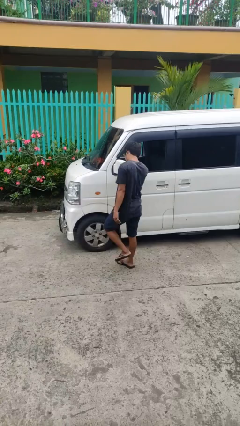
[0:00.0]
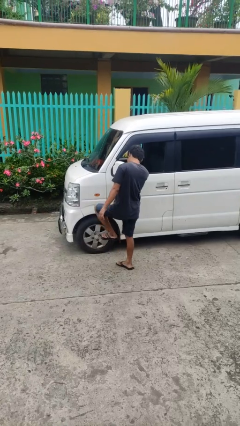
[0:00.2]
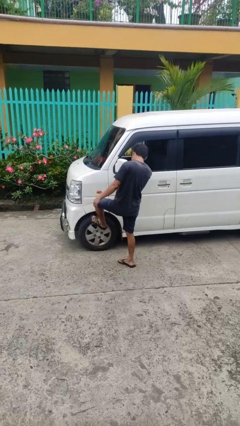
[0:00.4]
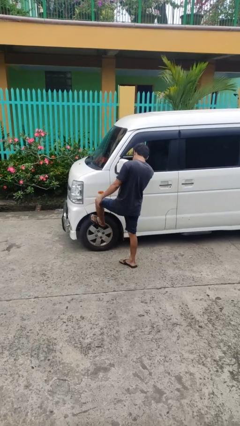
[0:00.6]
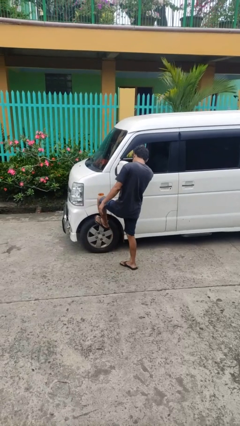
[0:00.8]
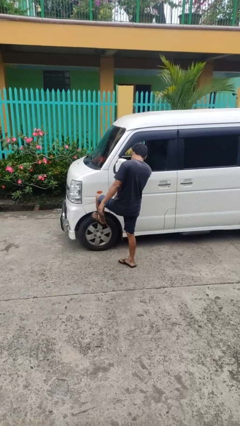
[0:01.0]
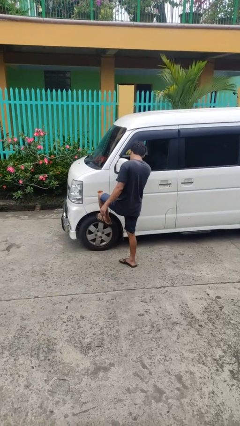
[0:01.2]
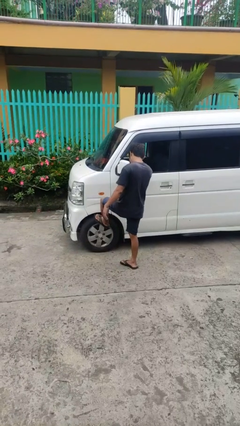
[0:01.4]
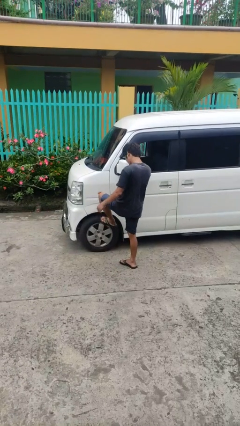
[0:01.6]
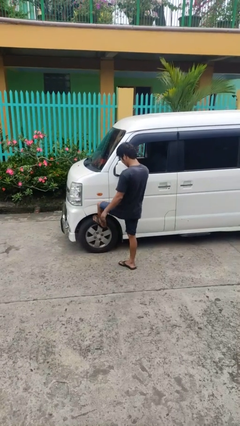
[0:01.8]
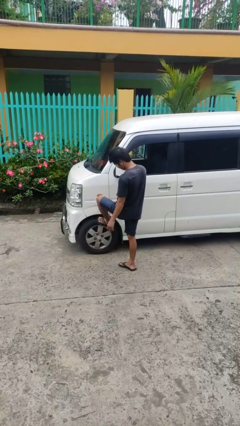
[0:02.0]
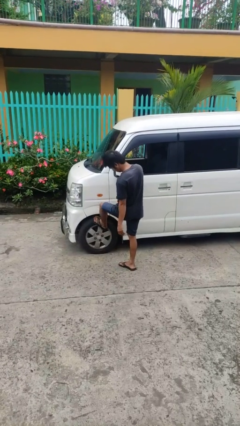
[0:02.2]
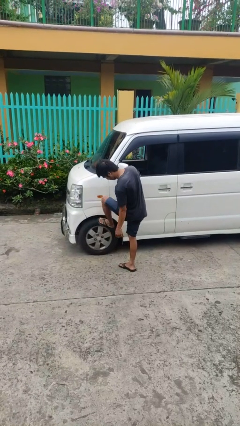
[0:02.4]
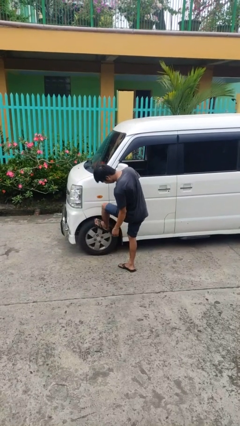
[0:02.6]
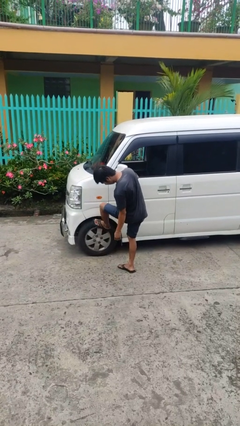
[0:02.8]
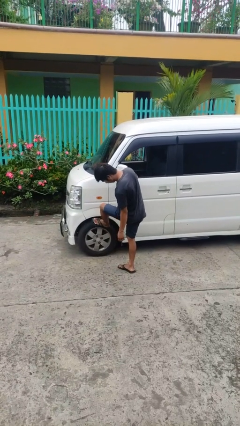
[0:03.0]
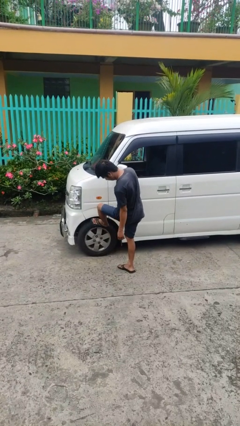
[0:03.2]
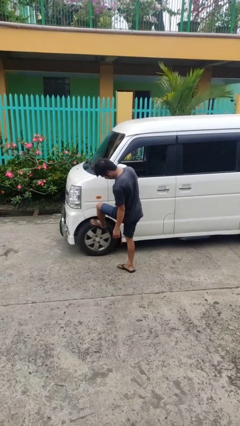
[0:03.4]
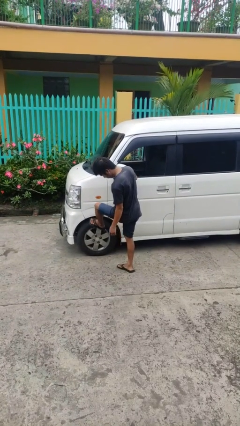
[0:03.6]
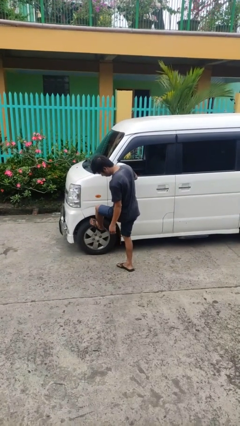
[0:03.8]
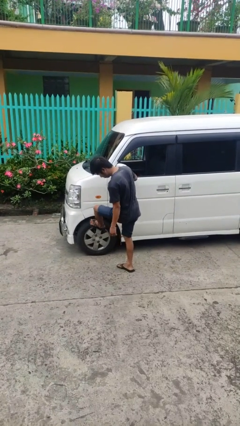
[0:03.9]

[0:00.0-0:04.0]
person kicks car tires

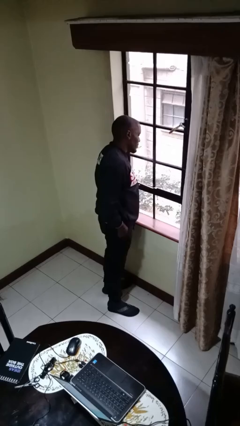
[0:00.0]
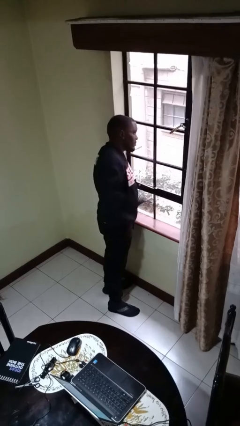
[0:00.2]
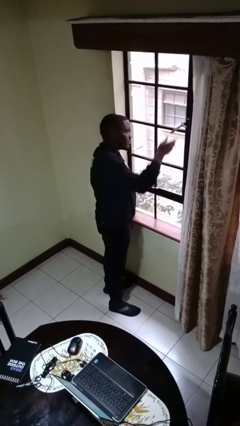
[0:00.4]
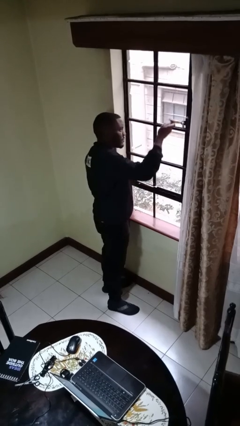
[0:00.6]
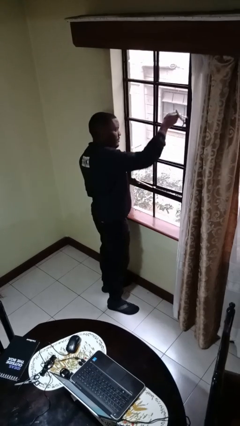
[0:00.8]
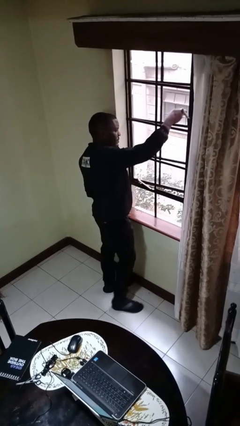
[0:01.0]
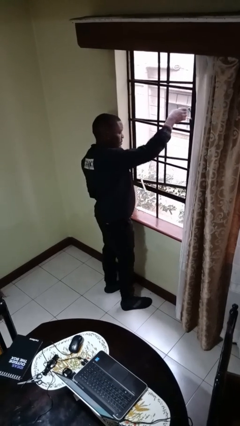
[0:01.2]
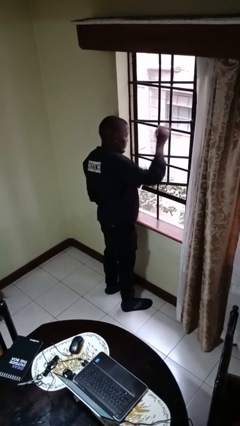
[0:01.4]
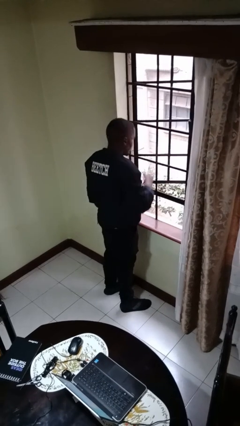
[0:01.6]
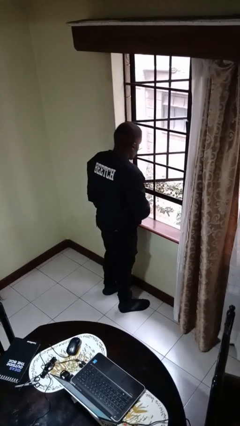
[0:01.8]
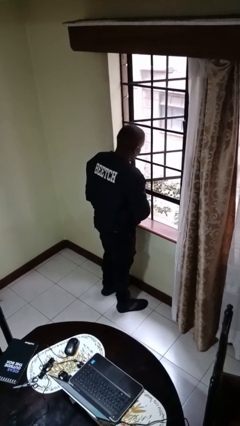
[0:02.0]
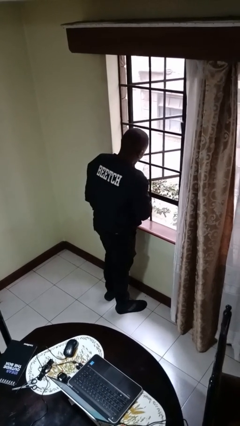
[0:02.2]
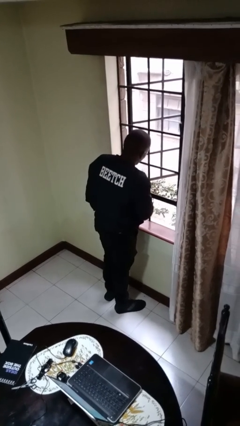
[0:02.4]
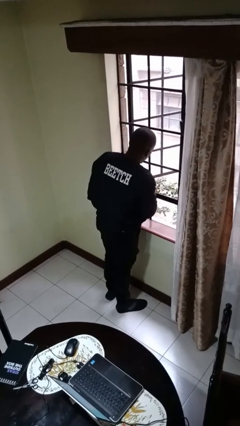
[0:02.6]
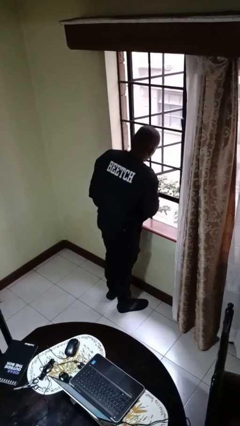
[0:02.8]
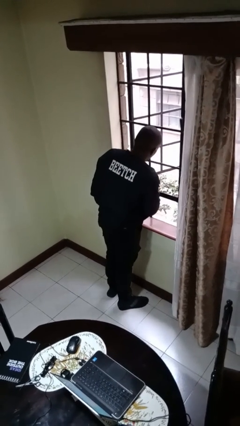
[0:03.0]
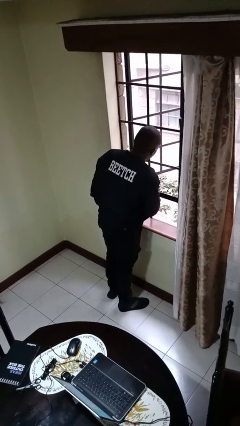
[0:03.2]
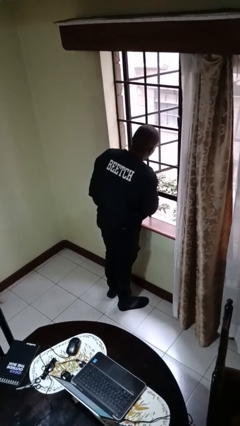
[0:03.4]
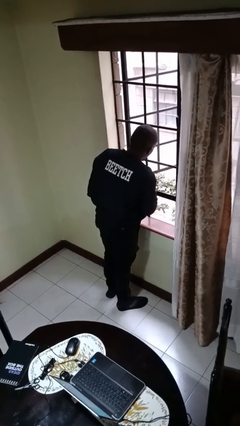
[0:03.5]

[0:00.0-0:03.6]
person opens home window

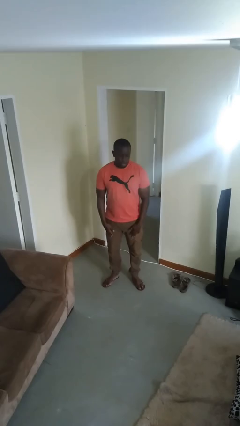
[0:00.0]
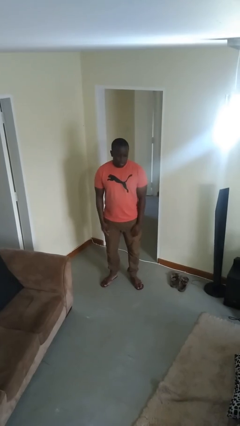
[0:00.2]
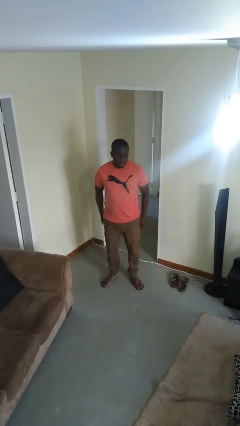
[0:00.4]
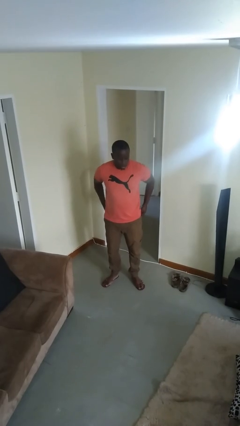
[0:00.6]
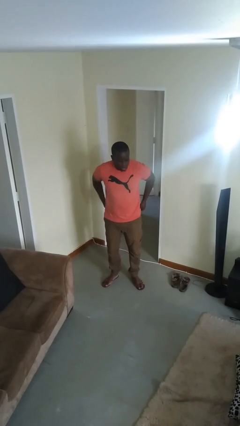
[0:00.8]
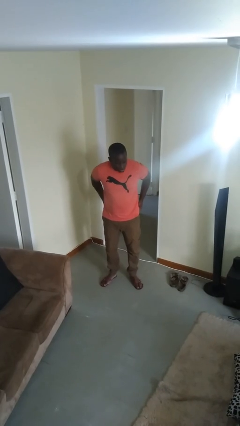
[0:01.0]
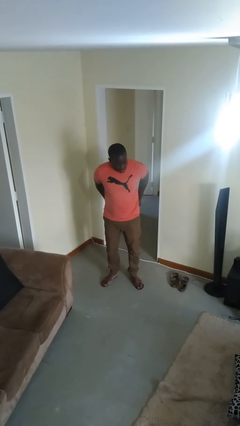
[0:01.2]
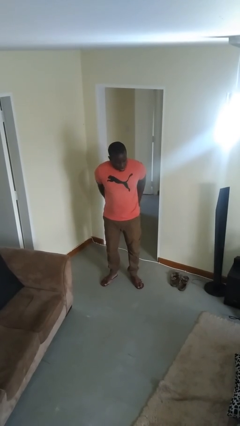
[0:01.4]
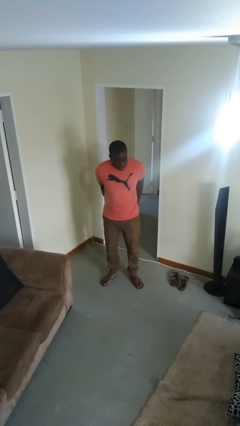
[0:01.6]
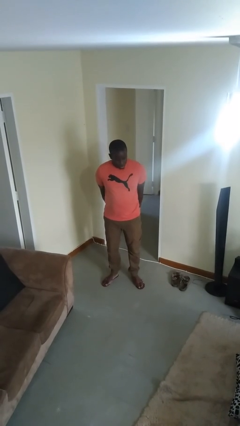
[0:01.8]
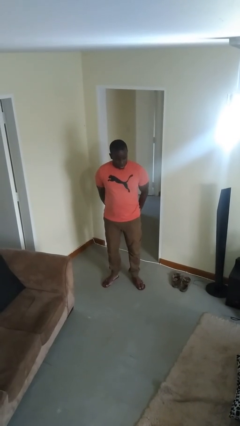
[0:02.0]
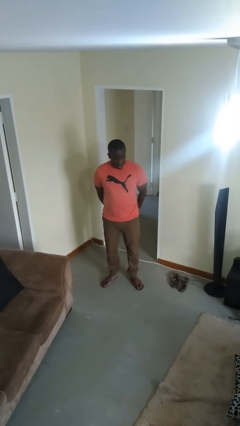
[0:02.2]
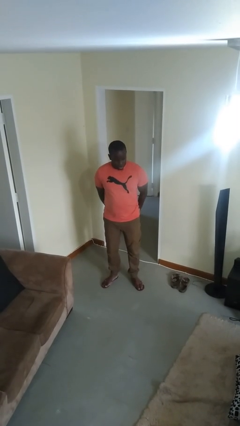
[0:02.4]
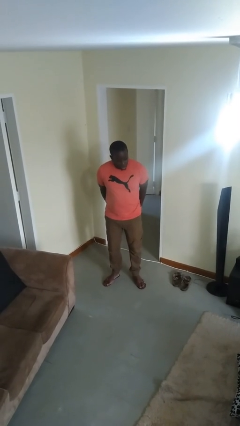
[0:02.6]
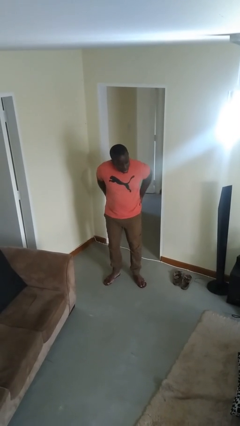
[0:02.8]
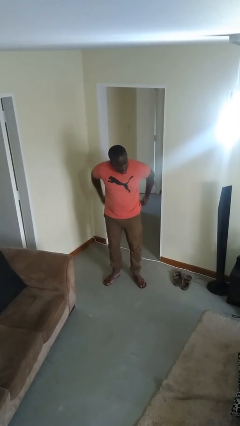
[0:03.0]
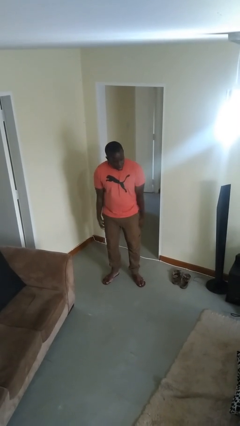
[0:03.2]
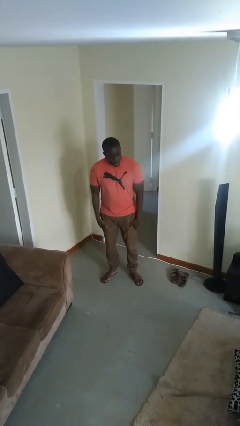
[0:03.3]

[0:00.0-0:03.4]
person puts hands in back pockets

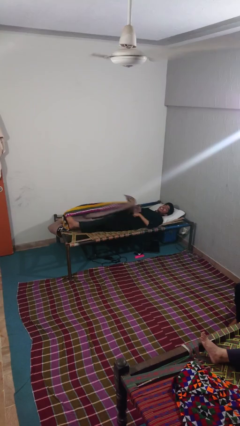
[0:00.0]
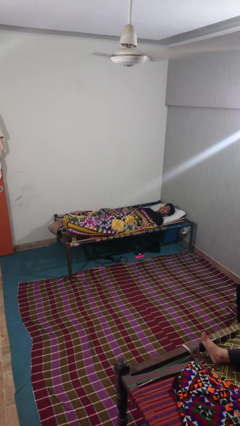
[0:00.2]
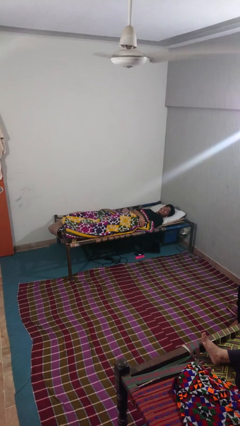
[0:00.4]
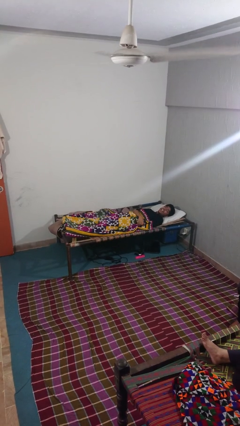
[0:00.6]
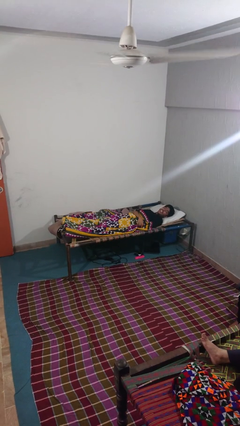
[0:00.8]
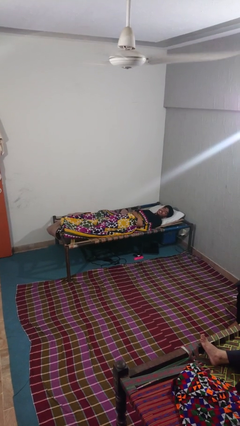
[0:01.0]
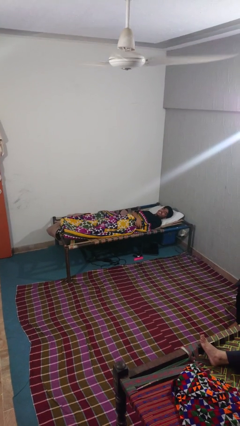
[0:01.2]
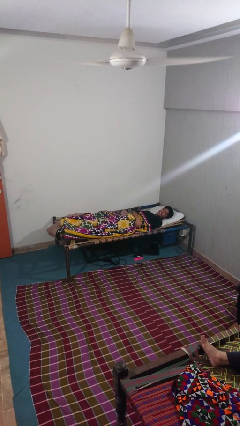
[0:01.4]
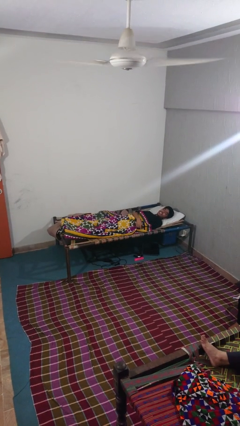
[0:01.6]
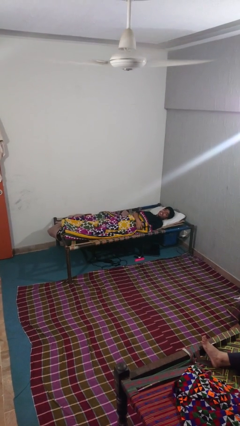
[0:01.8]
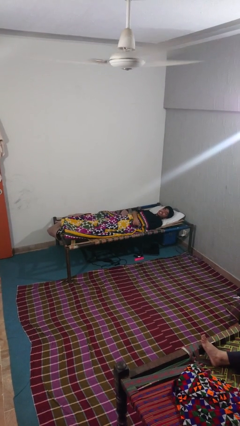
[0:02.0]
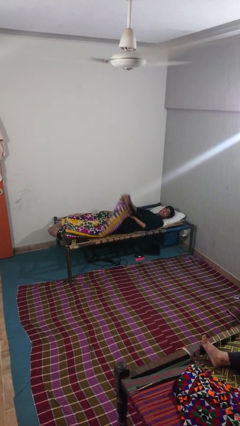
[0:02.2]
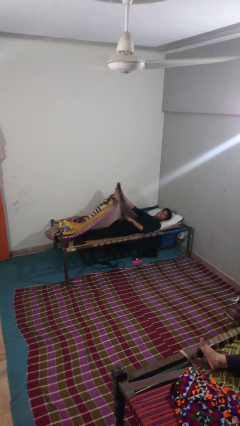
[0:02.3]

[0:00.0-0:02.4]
person covers with bedsheets

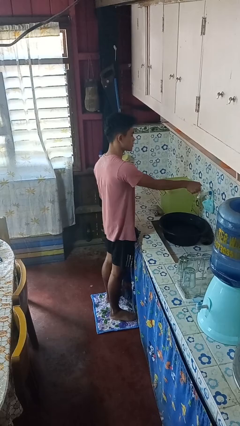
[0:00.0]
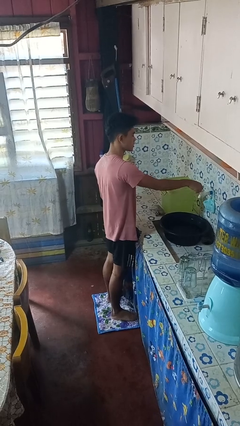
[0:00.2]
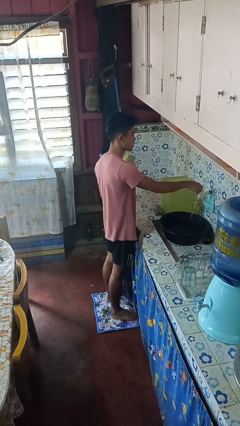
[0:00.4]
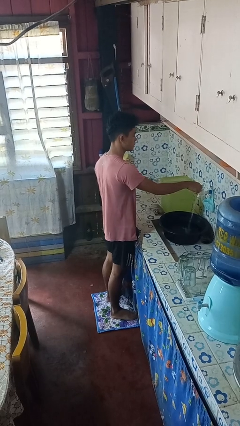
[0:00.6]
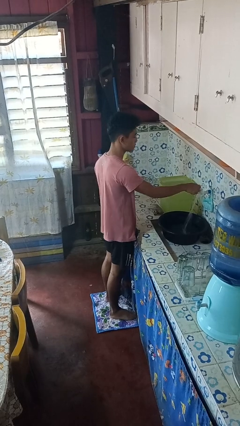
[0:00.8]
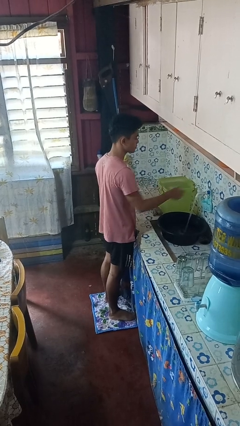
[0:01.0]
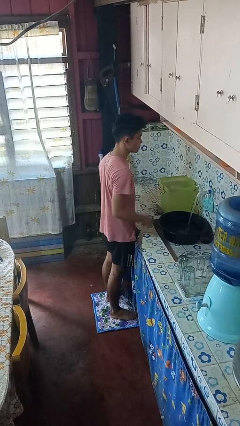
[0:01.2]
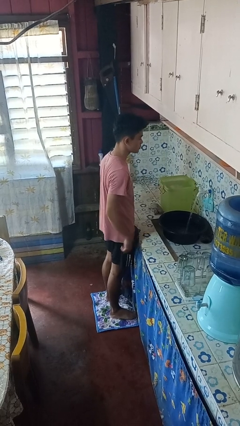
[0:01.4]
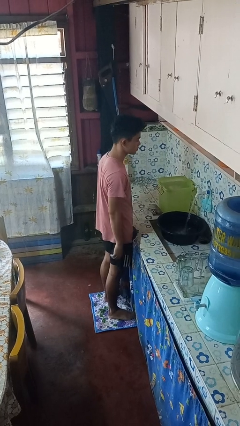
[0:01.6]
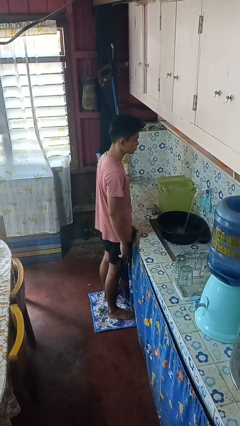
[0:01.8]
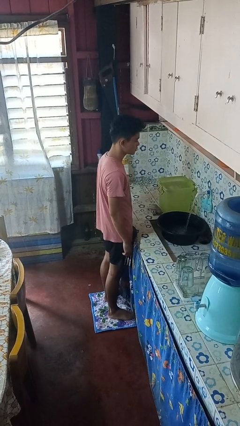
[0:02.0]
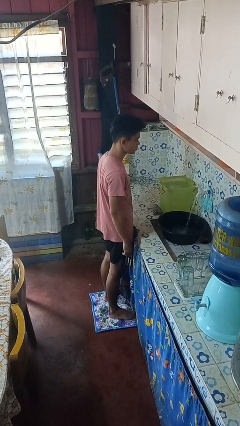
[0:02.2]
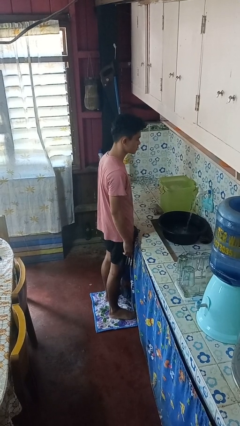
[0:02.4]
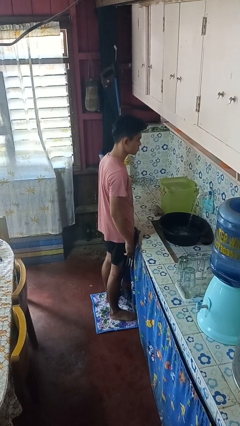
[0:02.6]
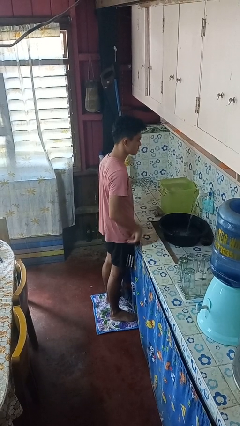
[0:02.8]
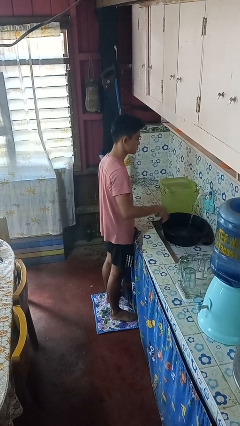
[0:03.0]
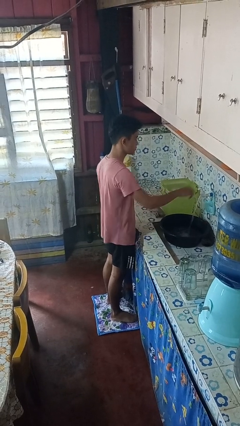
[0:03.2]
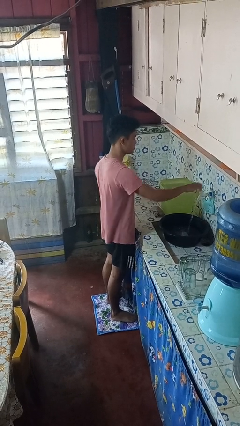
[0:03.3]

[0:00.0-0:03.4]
person turns on faucet

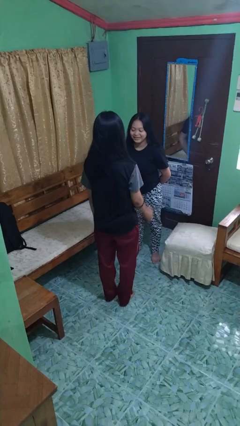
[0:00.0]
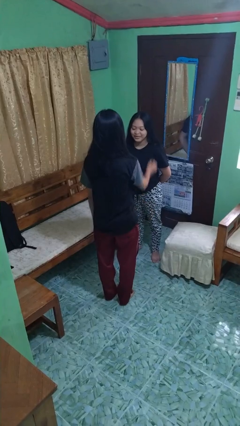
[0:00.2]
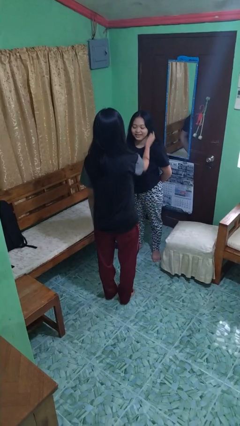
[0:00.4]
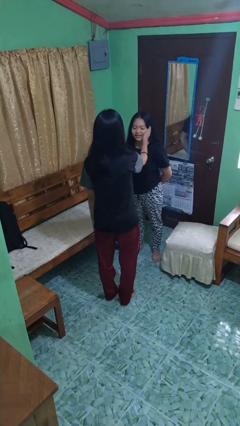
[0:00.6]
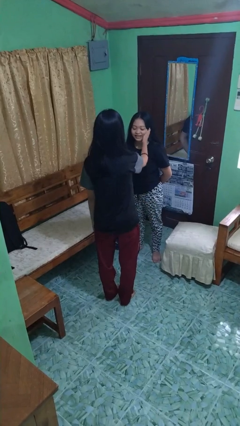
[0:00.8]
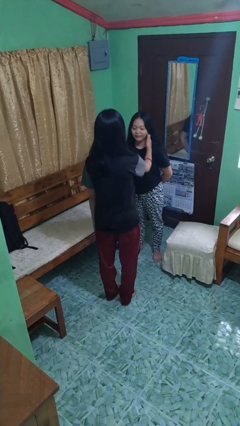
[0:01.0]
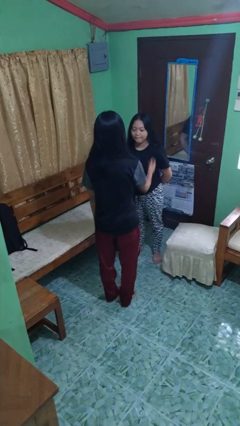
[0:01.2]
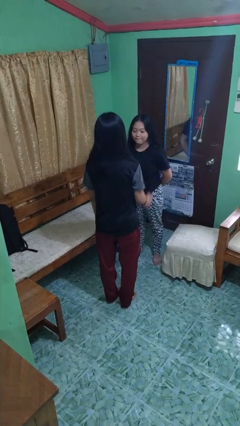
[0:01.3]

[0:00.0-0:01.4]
person touches face of person
